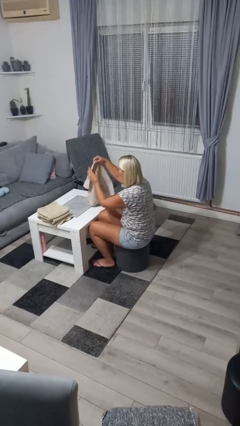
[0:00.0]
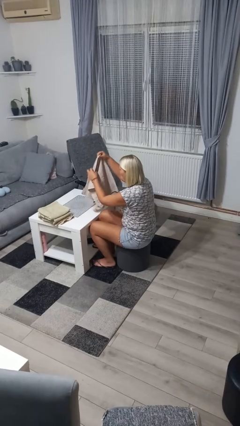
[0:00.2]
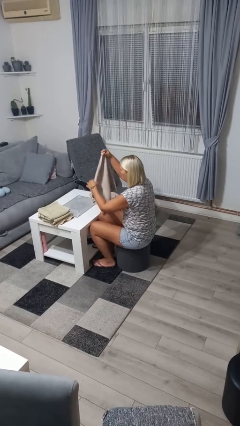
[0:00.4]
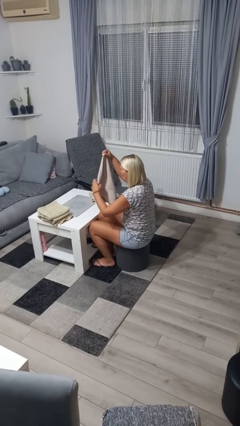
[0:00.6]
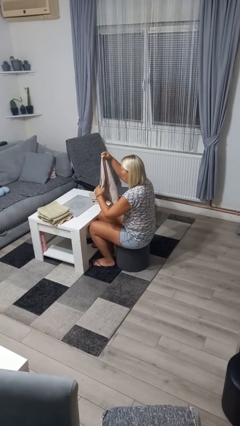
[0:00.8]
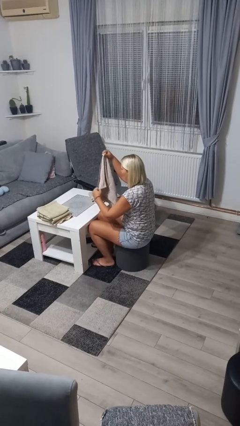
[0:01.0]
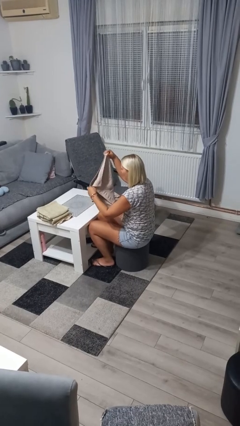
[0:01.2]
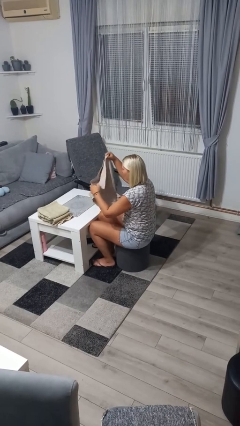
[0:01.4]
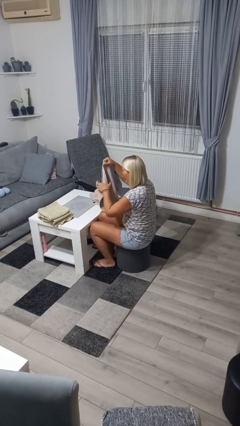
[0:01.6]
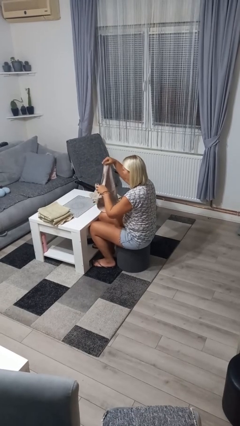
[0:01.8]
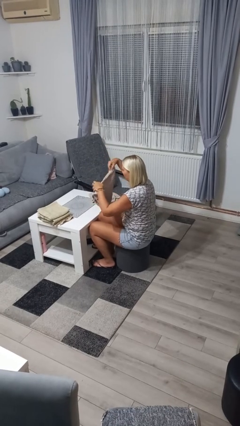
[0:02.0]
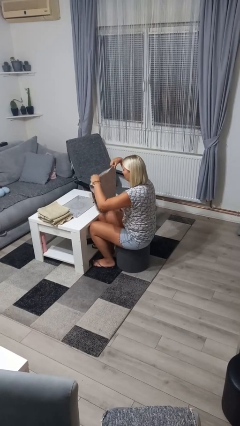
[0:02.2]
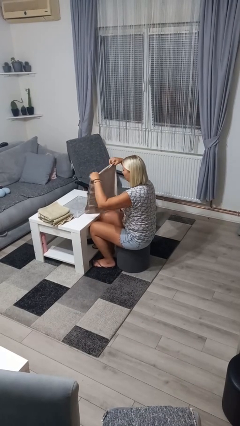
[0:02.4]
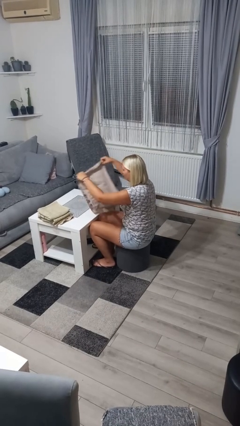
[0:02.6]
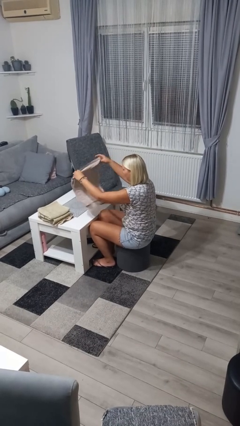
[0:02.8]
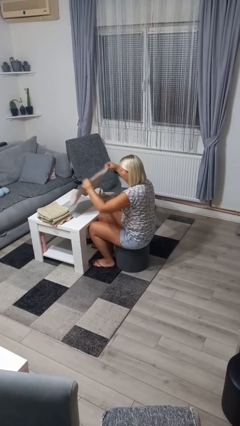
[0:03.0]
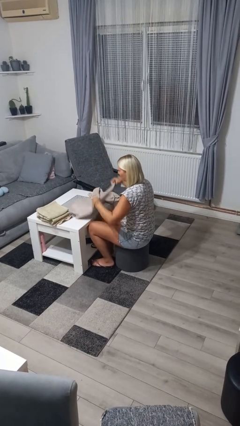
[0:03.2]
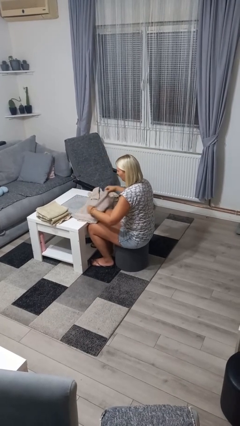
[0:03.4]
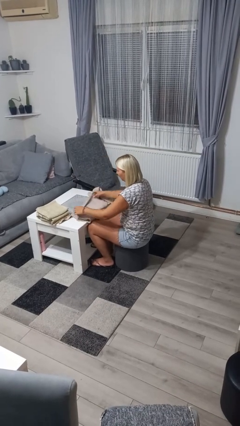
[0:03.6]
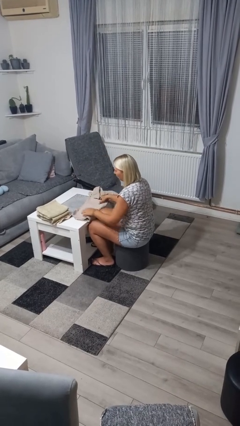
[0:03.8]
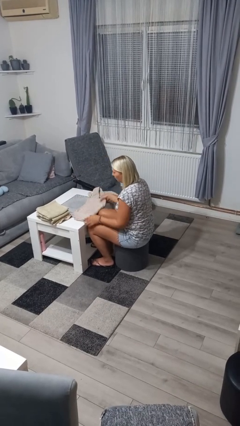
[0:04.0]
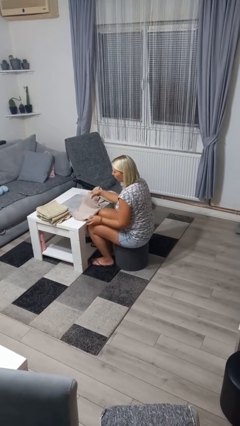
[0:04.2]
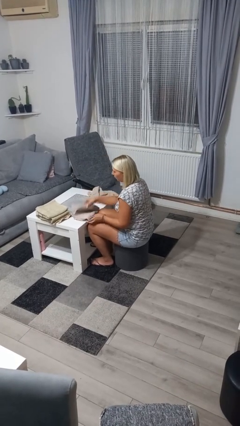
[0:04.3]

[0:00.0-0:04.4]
person folds towel

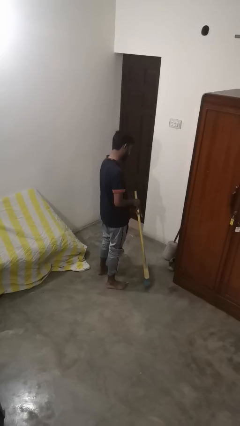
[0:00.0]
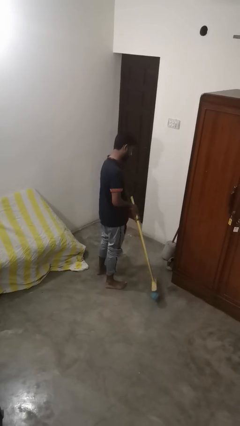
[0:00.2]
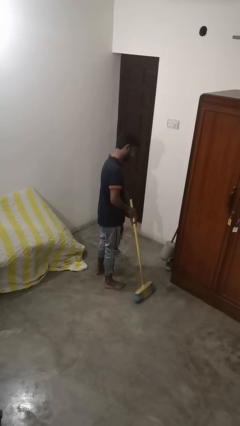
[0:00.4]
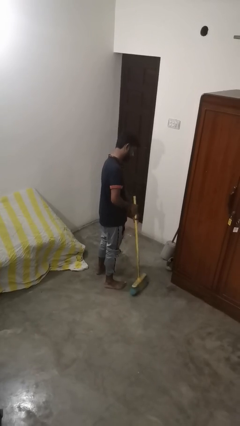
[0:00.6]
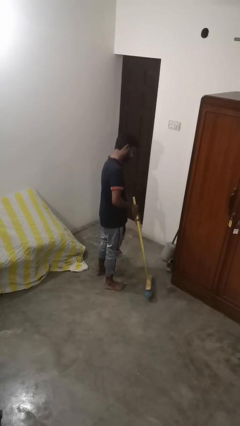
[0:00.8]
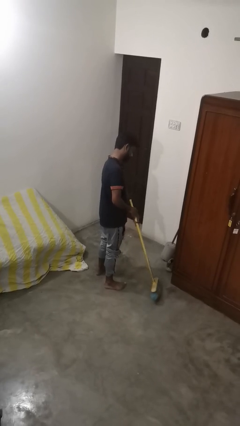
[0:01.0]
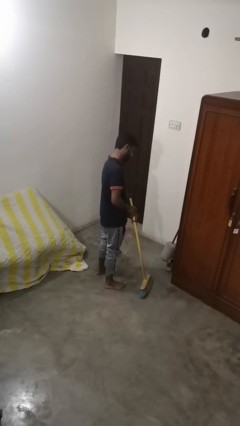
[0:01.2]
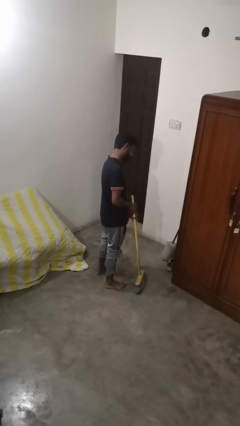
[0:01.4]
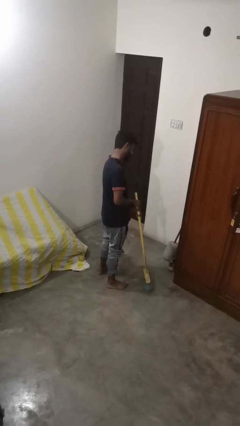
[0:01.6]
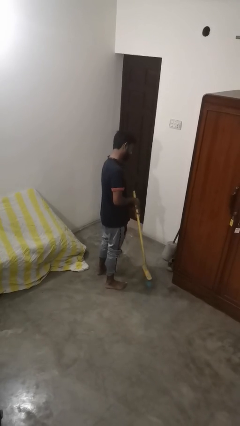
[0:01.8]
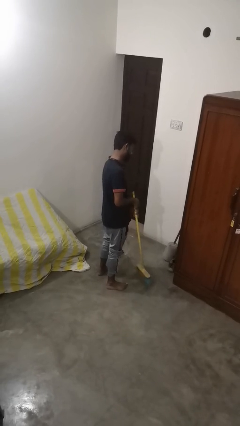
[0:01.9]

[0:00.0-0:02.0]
person sweeps floor

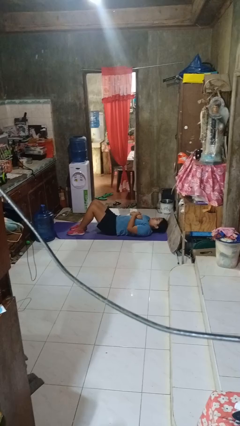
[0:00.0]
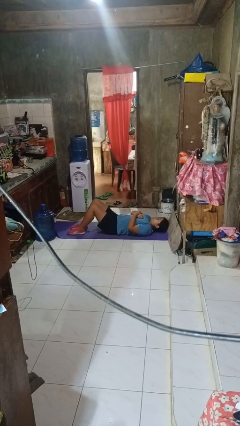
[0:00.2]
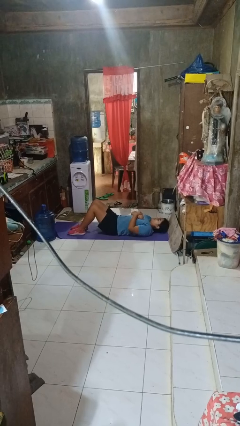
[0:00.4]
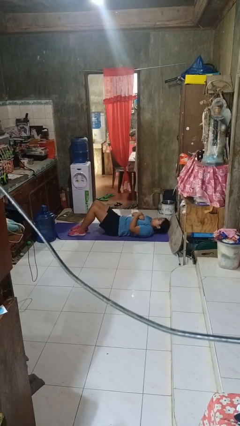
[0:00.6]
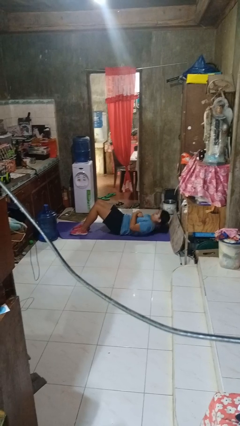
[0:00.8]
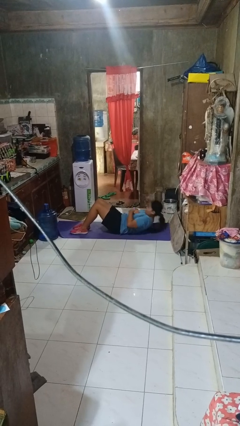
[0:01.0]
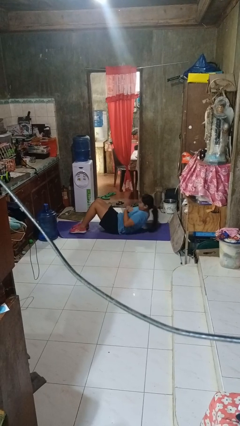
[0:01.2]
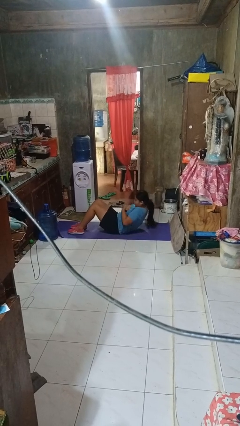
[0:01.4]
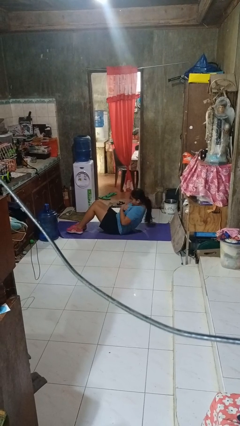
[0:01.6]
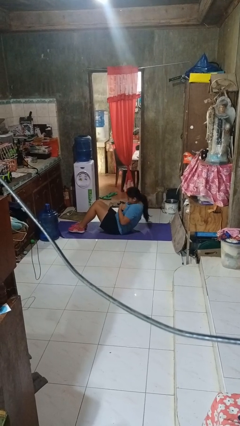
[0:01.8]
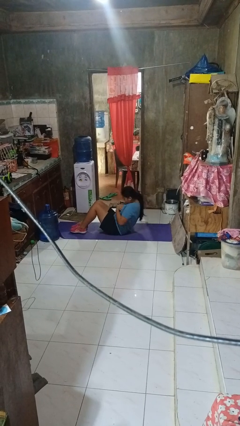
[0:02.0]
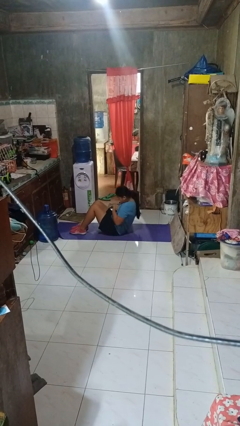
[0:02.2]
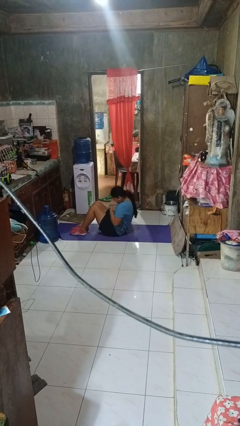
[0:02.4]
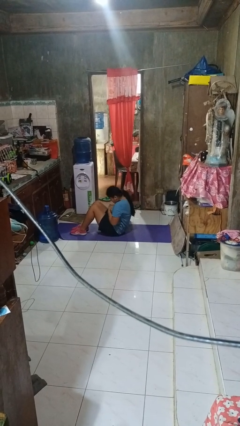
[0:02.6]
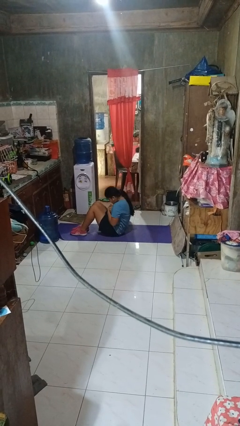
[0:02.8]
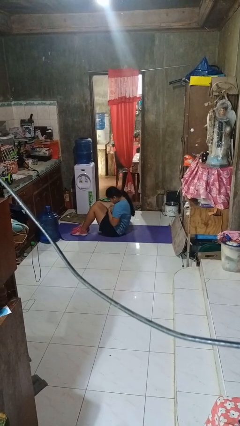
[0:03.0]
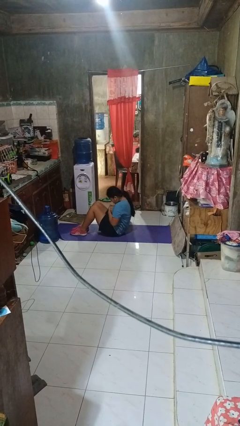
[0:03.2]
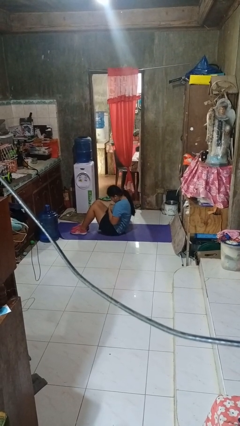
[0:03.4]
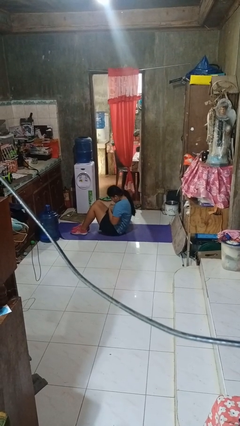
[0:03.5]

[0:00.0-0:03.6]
person exercises with situp

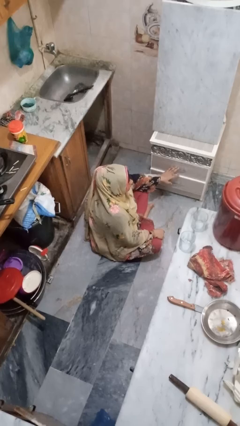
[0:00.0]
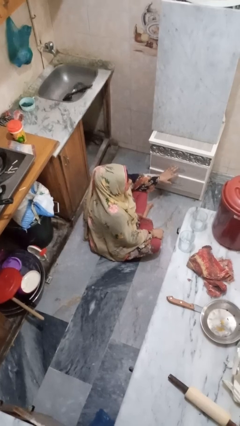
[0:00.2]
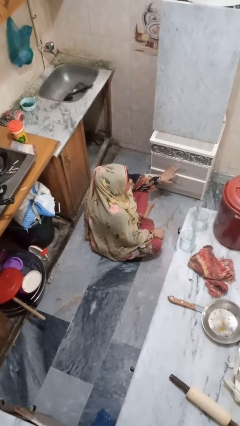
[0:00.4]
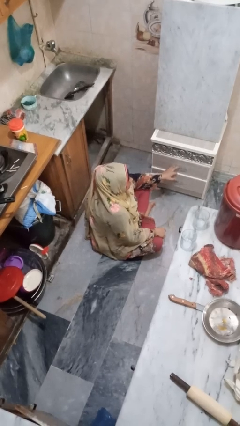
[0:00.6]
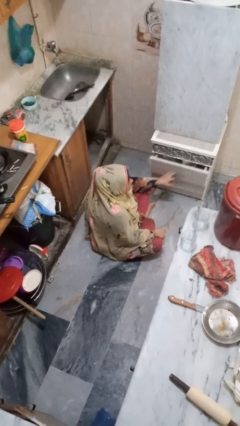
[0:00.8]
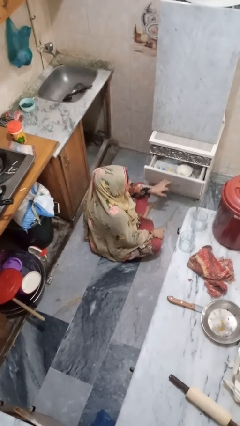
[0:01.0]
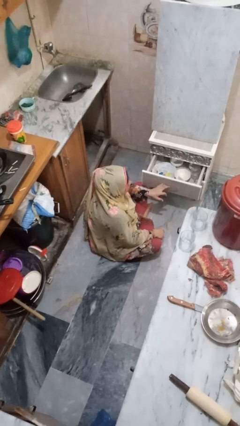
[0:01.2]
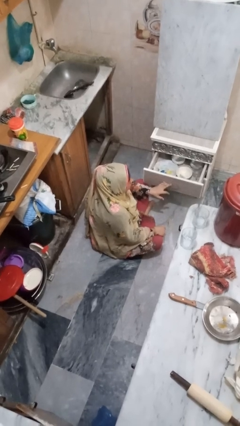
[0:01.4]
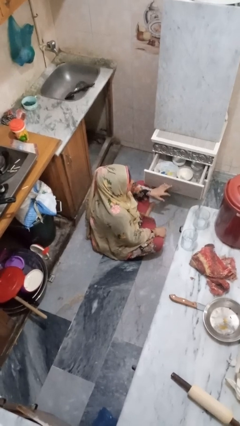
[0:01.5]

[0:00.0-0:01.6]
person opens kitchen drawer

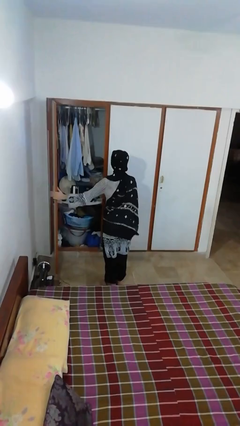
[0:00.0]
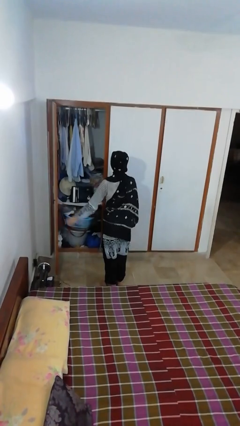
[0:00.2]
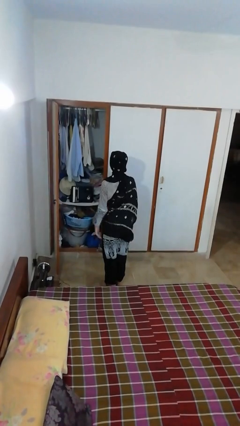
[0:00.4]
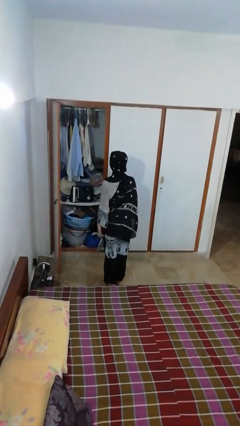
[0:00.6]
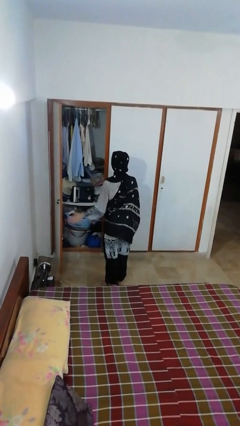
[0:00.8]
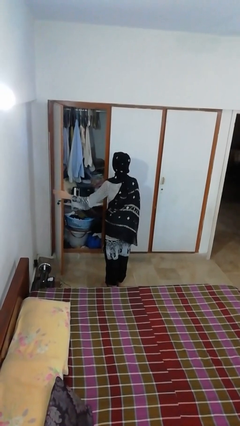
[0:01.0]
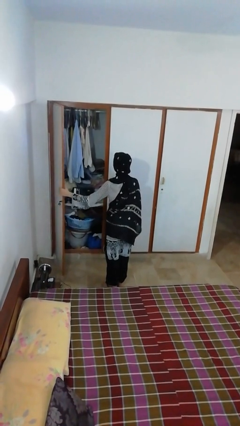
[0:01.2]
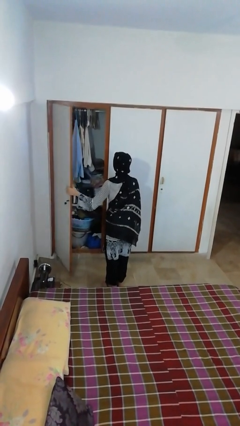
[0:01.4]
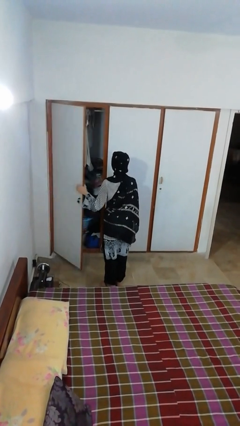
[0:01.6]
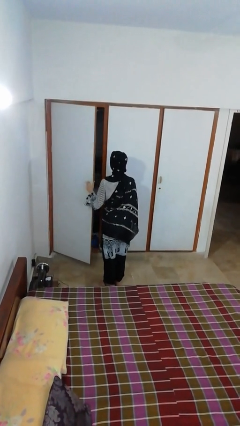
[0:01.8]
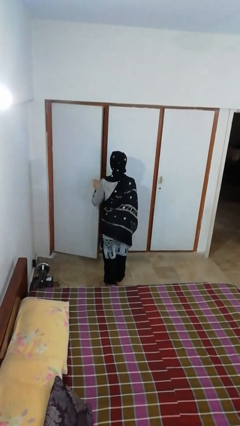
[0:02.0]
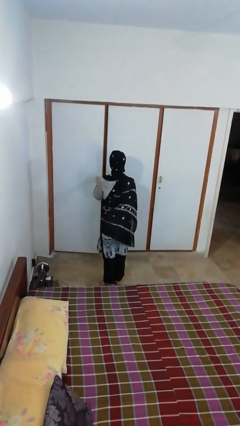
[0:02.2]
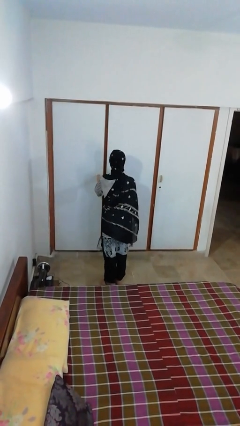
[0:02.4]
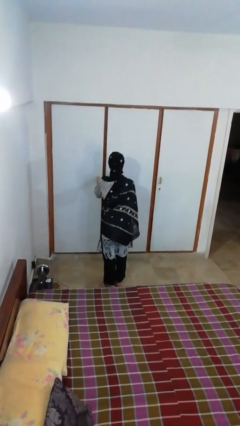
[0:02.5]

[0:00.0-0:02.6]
person closes closet door

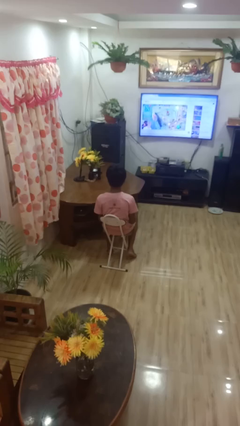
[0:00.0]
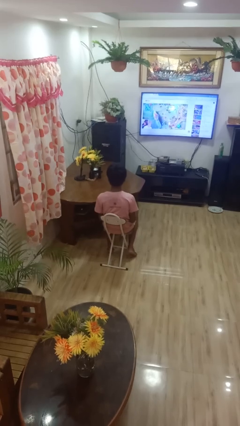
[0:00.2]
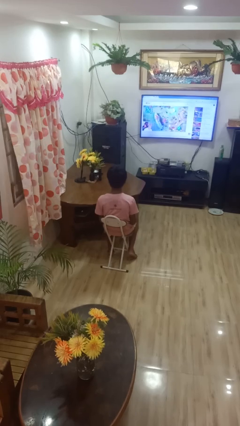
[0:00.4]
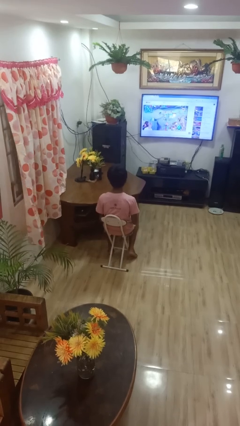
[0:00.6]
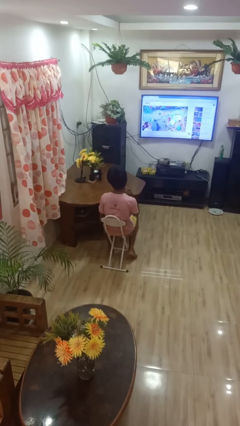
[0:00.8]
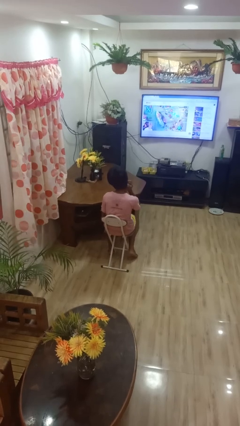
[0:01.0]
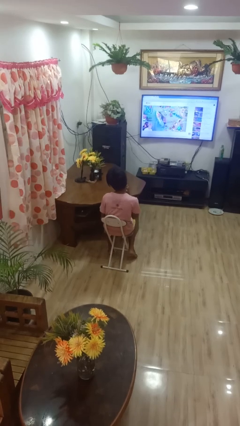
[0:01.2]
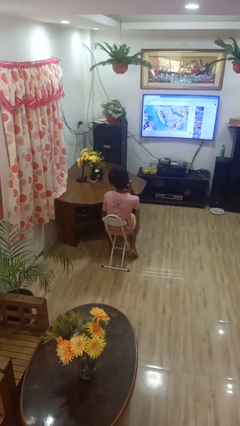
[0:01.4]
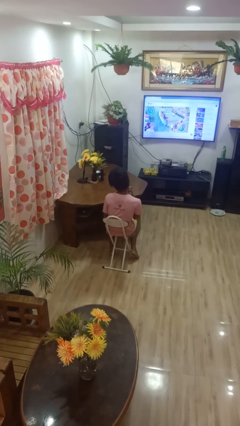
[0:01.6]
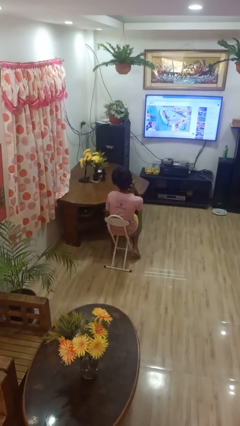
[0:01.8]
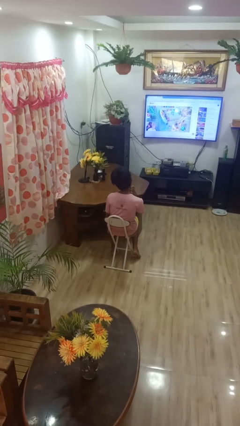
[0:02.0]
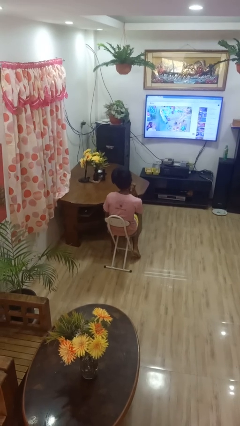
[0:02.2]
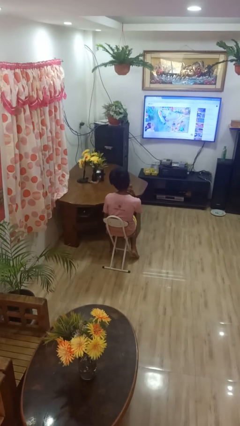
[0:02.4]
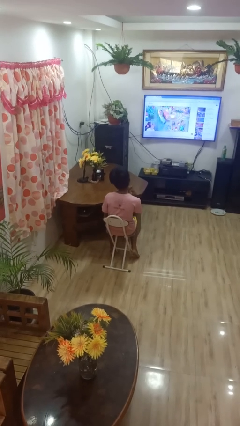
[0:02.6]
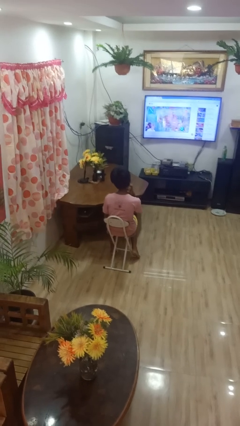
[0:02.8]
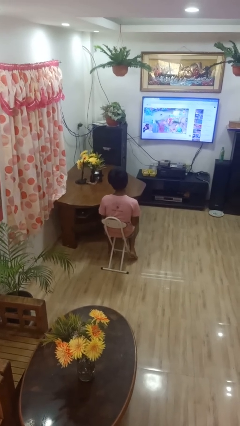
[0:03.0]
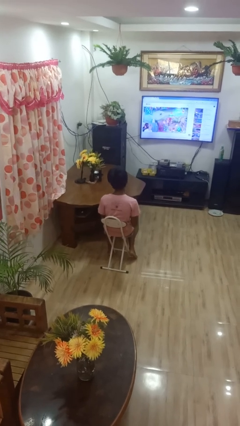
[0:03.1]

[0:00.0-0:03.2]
person rubs neck
